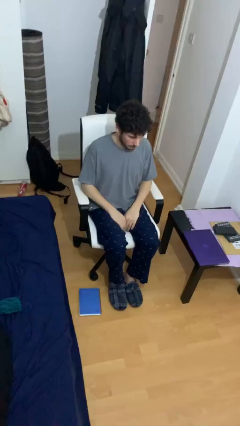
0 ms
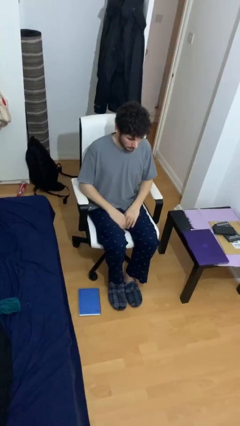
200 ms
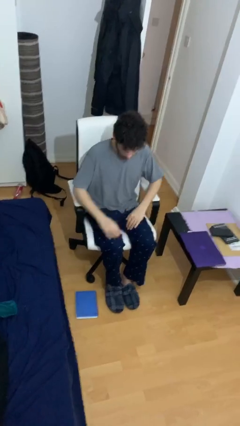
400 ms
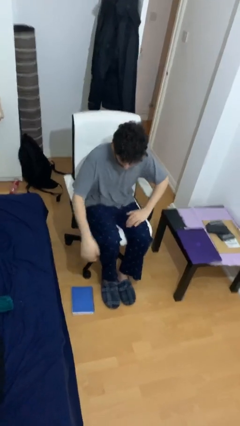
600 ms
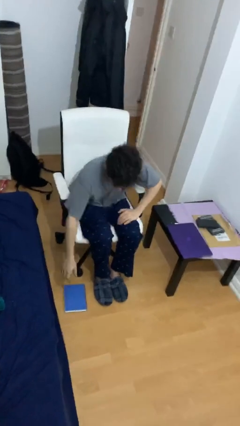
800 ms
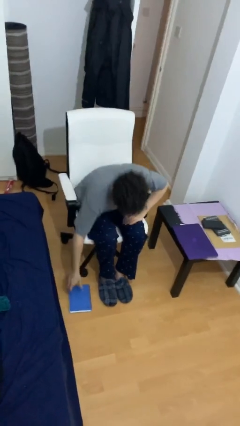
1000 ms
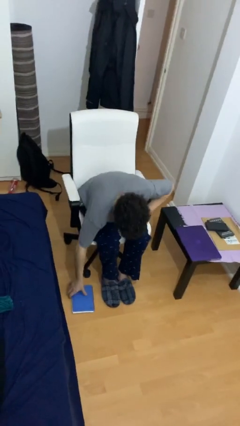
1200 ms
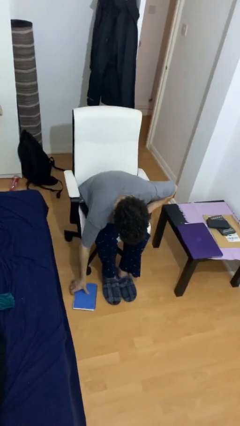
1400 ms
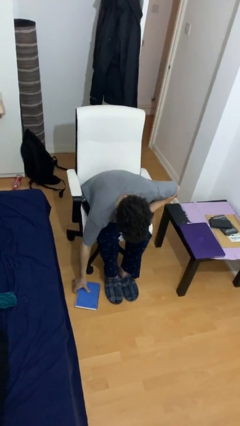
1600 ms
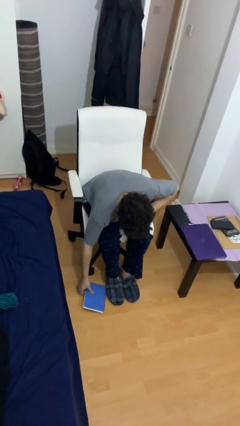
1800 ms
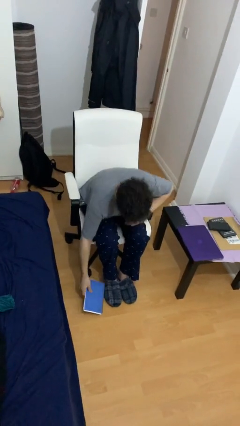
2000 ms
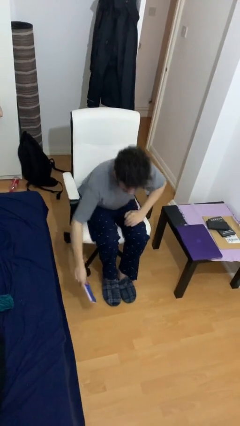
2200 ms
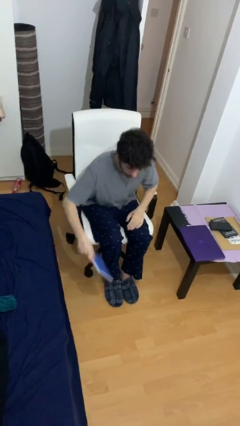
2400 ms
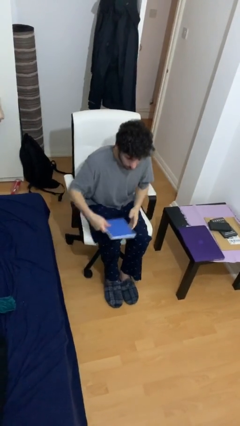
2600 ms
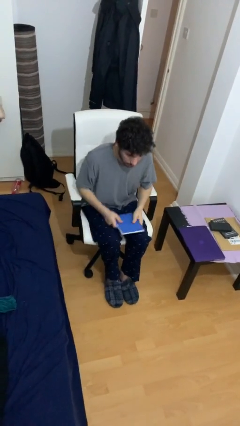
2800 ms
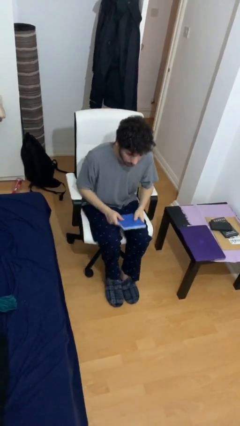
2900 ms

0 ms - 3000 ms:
person picks up object from floor

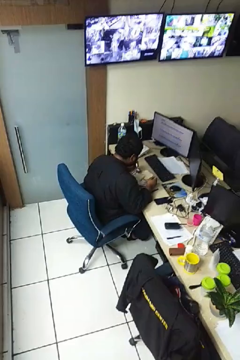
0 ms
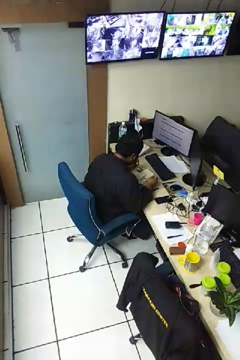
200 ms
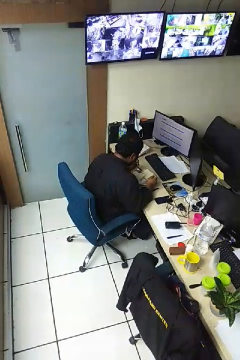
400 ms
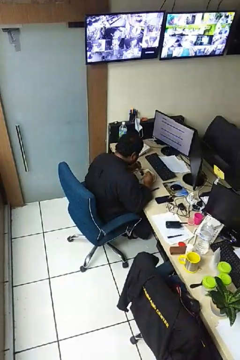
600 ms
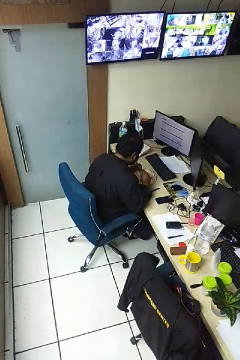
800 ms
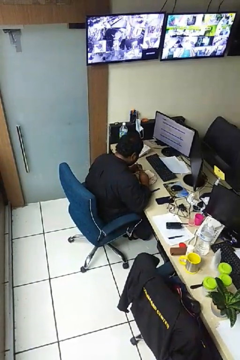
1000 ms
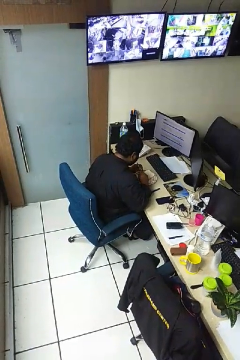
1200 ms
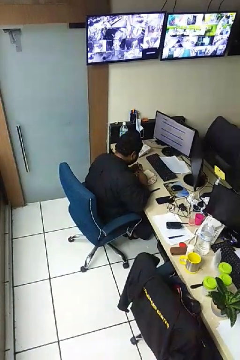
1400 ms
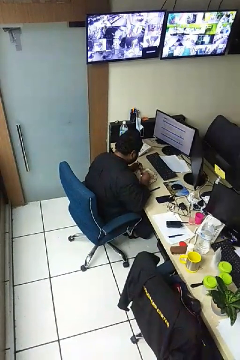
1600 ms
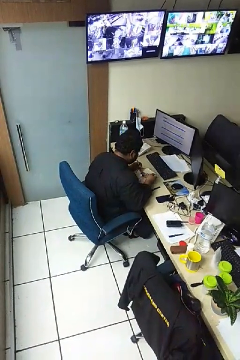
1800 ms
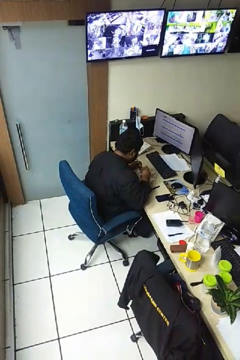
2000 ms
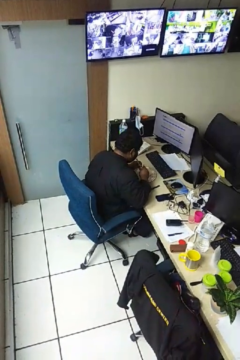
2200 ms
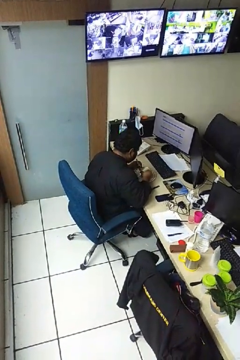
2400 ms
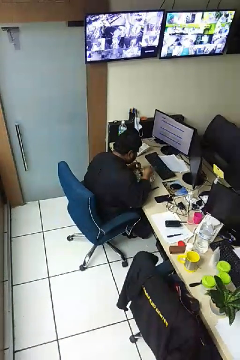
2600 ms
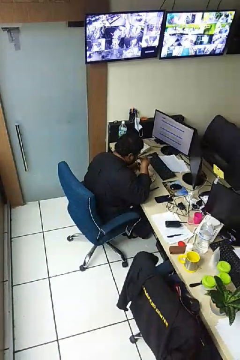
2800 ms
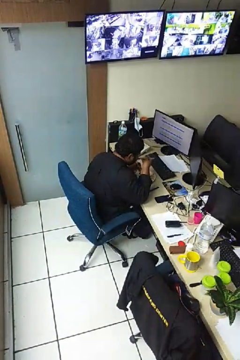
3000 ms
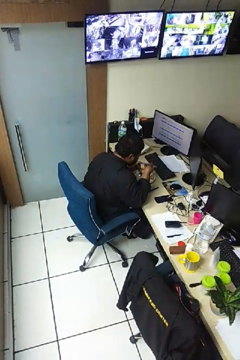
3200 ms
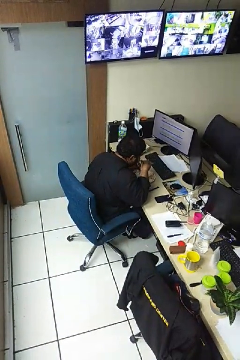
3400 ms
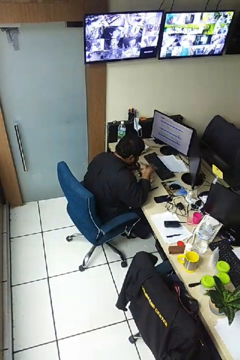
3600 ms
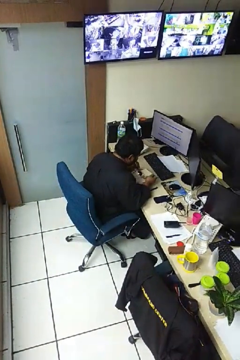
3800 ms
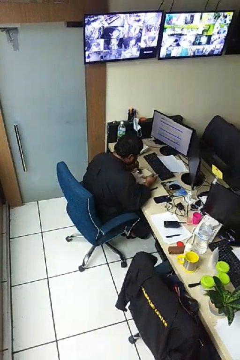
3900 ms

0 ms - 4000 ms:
person eats with utensil

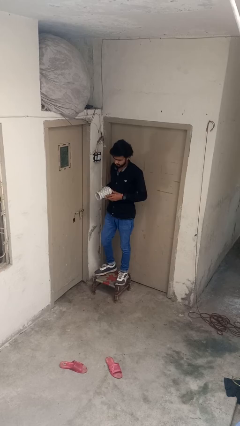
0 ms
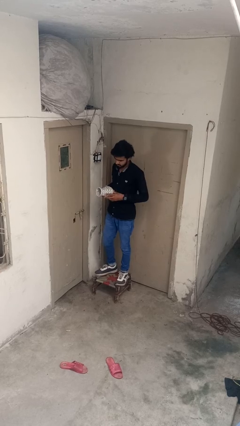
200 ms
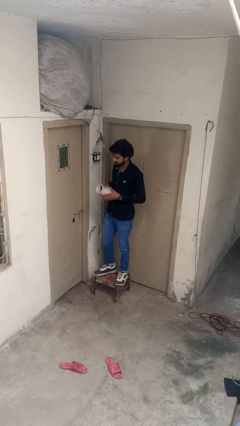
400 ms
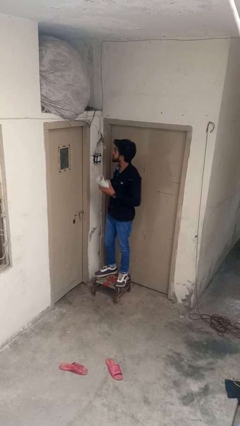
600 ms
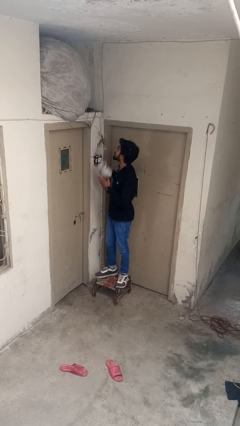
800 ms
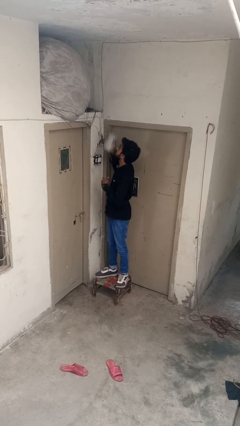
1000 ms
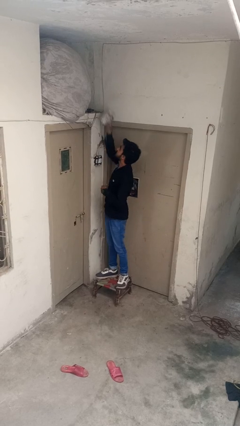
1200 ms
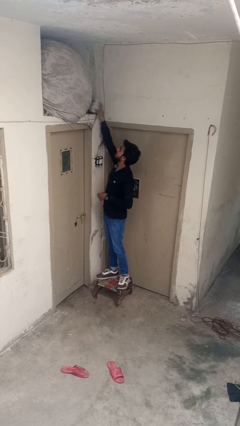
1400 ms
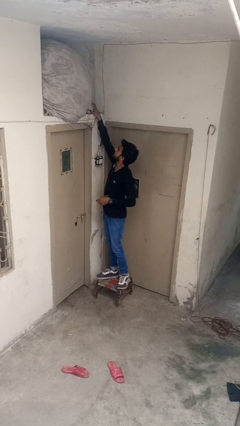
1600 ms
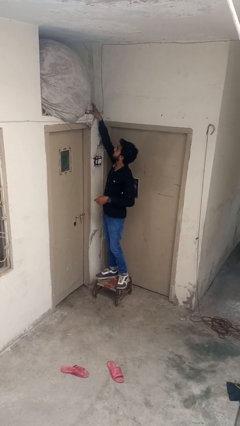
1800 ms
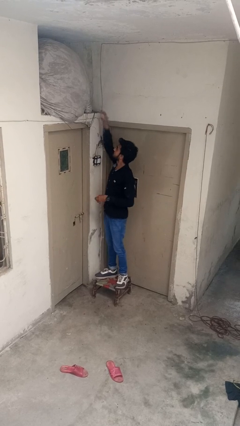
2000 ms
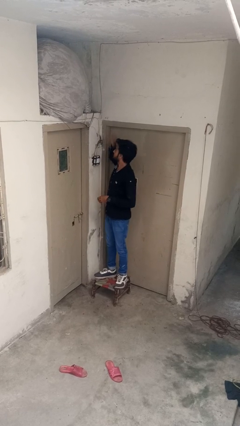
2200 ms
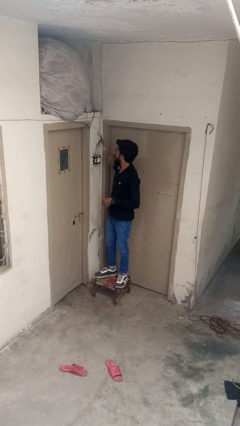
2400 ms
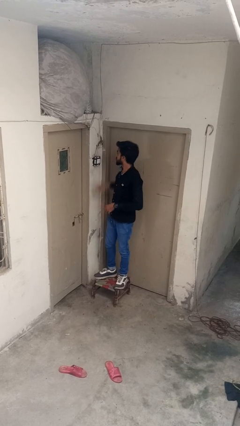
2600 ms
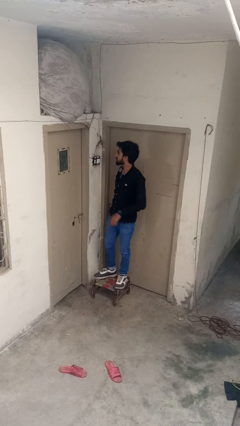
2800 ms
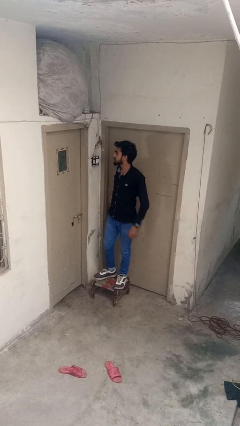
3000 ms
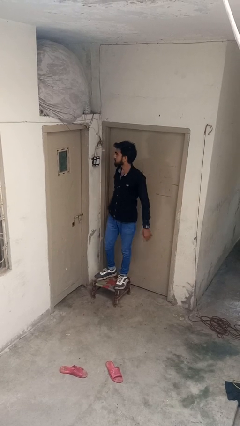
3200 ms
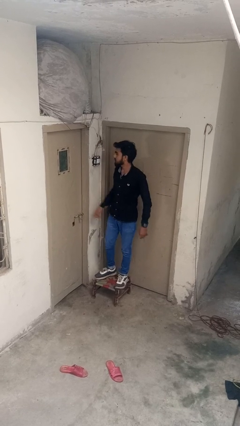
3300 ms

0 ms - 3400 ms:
person puts down object on shelf

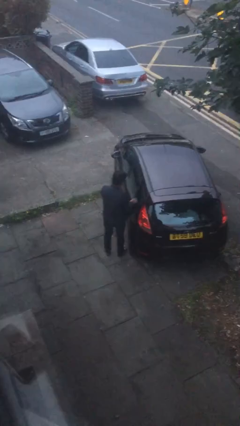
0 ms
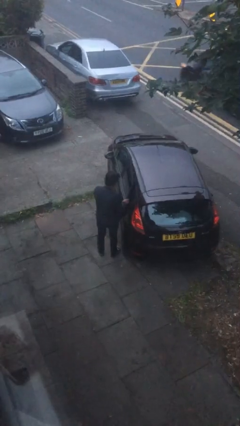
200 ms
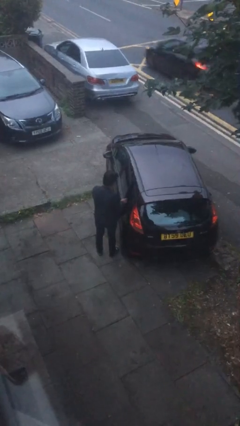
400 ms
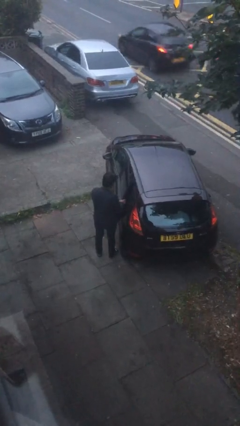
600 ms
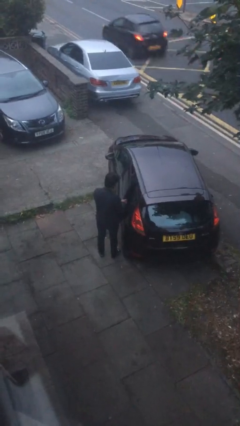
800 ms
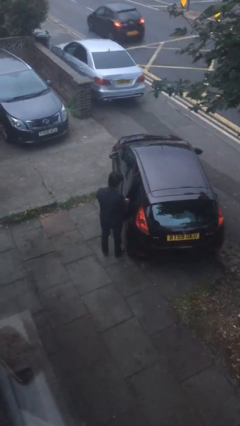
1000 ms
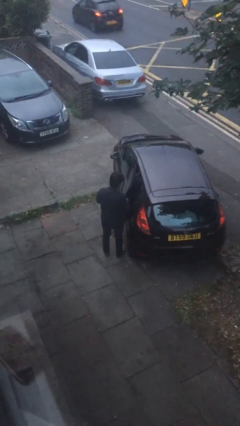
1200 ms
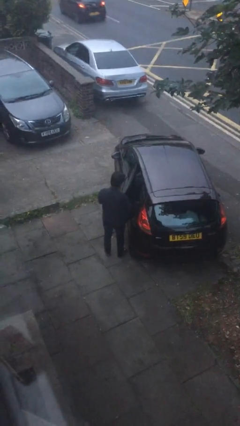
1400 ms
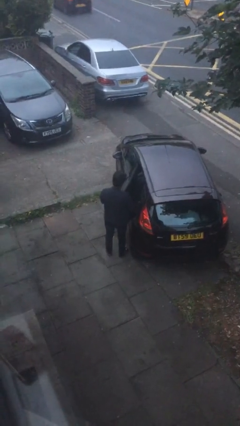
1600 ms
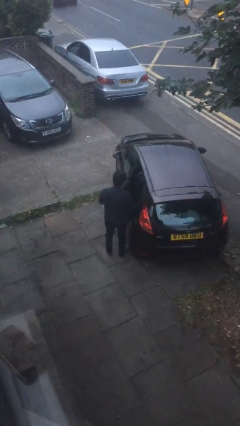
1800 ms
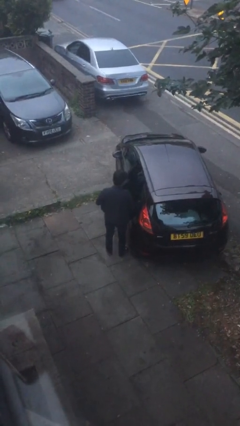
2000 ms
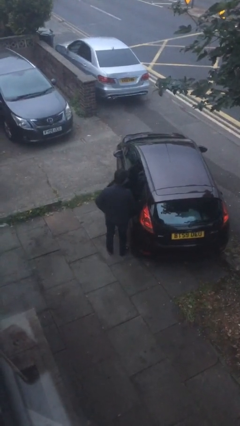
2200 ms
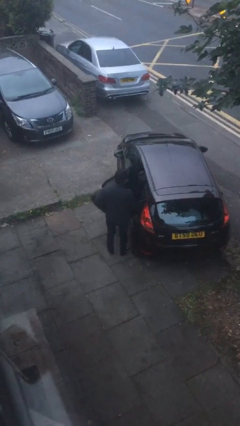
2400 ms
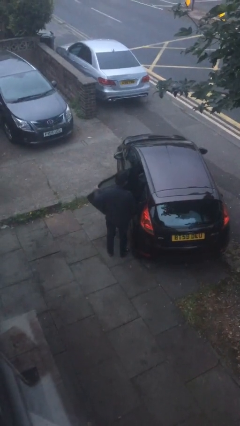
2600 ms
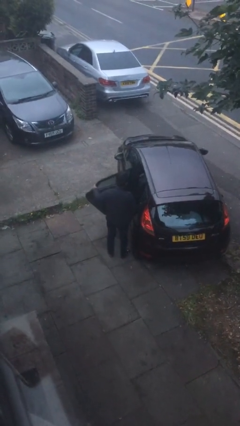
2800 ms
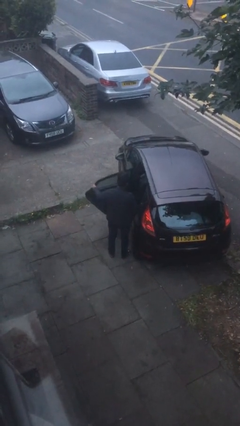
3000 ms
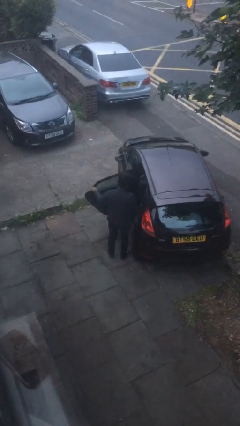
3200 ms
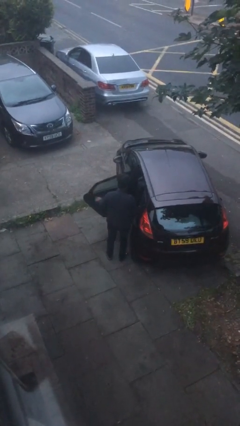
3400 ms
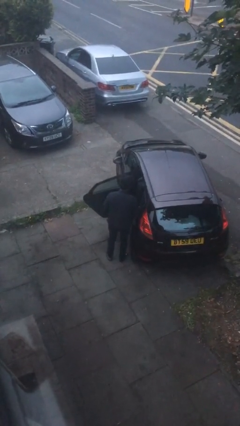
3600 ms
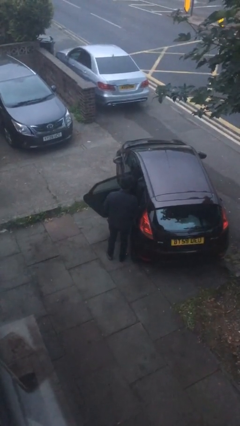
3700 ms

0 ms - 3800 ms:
person opens car door

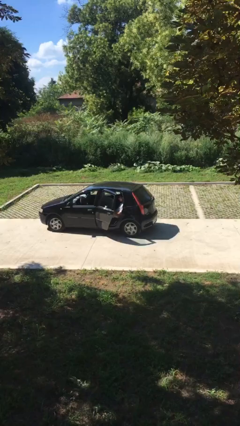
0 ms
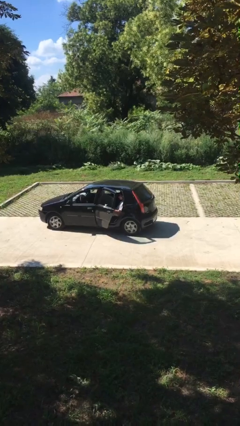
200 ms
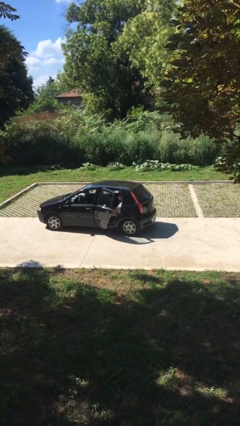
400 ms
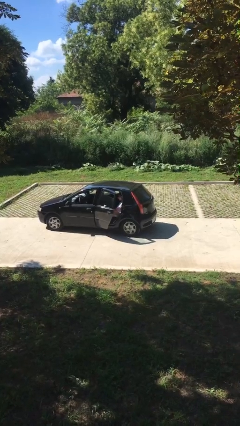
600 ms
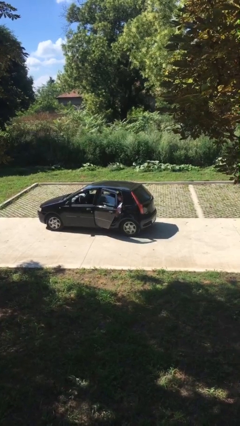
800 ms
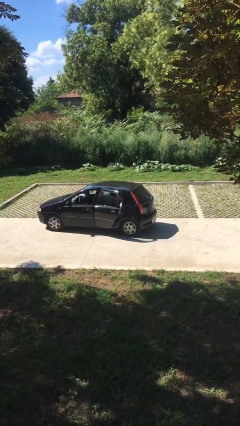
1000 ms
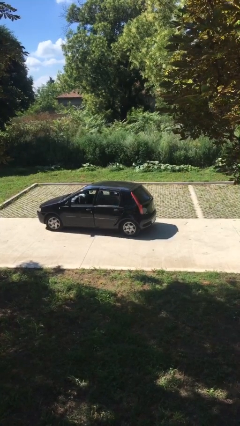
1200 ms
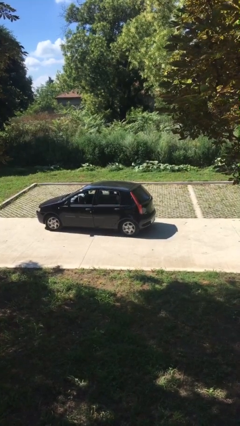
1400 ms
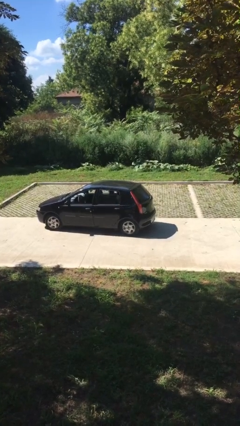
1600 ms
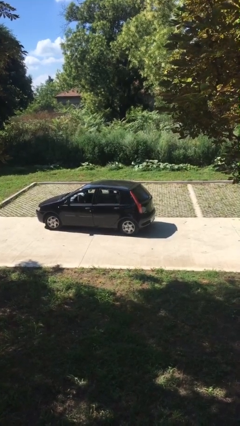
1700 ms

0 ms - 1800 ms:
person closes car door

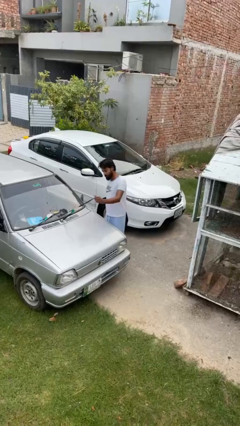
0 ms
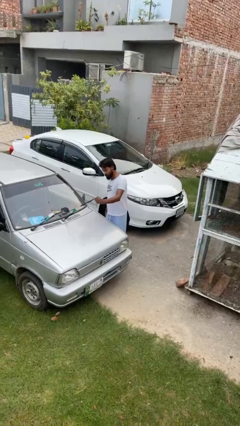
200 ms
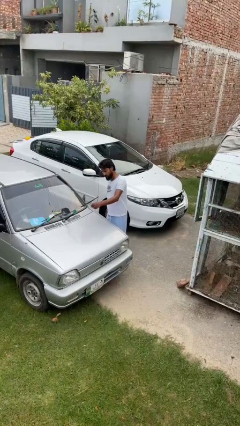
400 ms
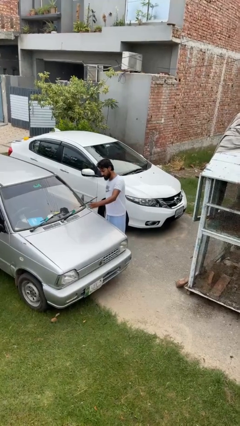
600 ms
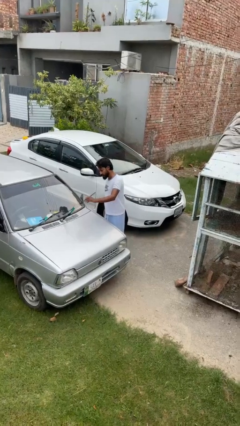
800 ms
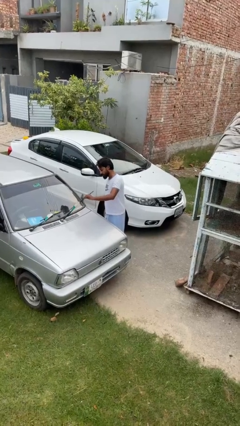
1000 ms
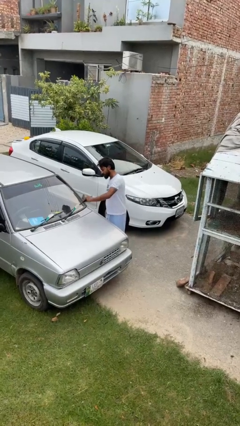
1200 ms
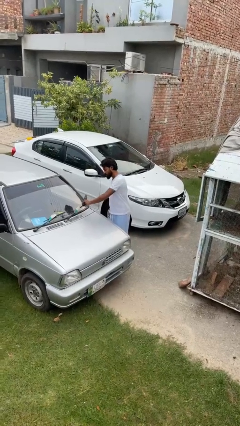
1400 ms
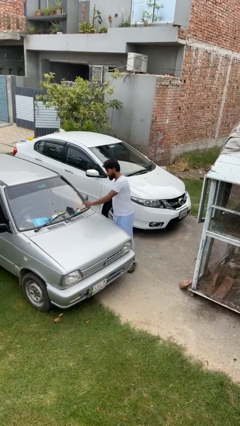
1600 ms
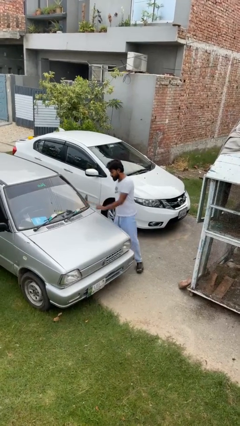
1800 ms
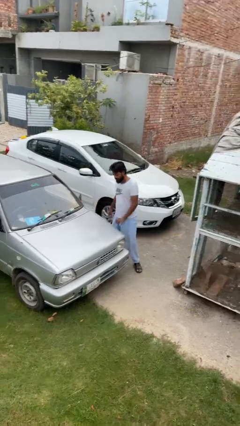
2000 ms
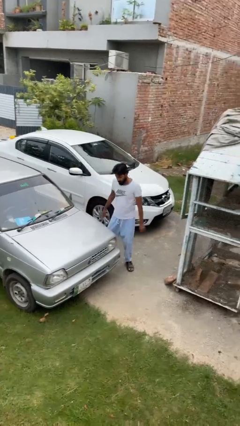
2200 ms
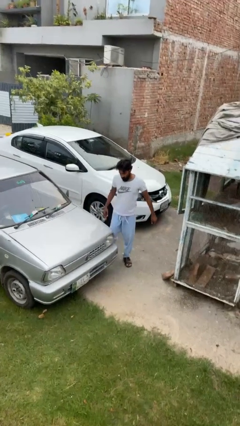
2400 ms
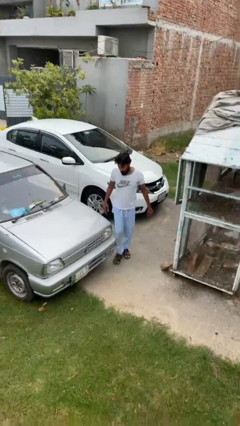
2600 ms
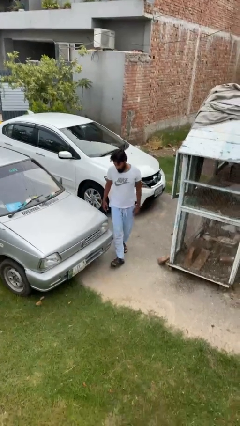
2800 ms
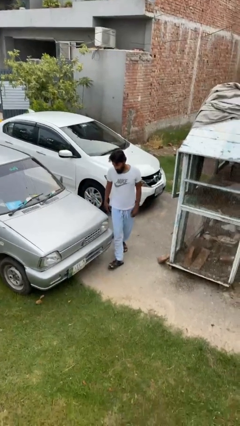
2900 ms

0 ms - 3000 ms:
person flips down car wipers
